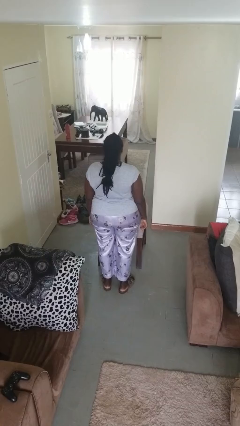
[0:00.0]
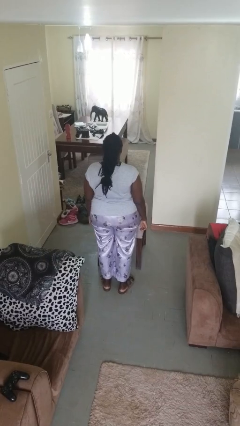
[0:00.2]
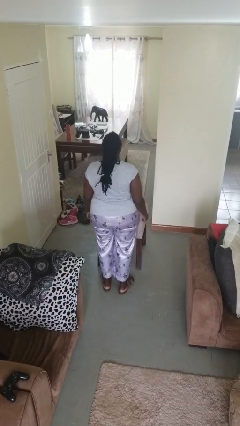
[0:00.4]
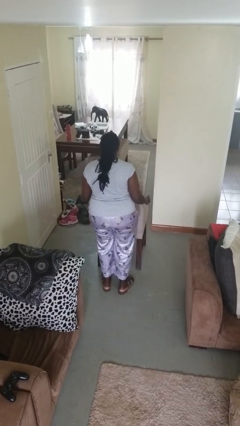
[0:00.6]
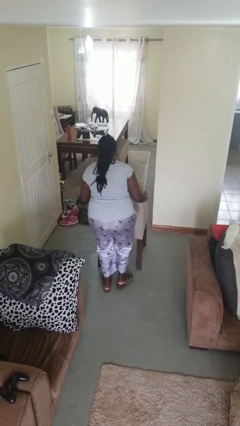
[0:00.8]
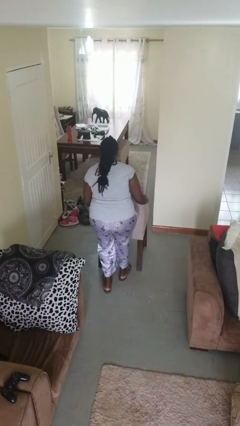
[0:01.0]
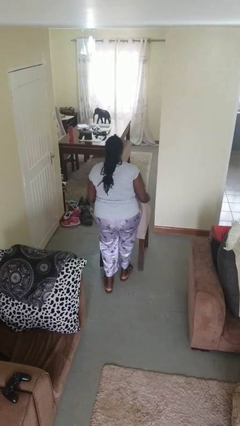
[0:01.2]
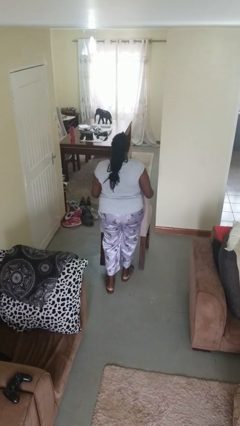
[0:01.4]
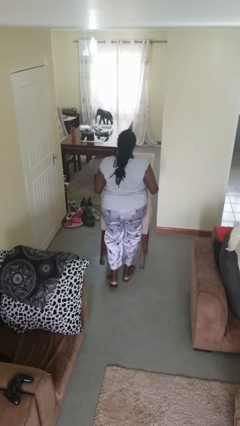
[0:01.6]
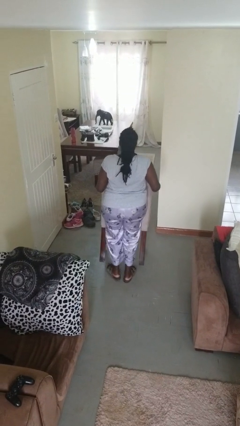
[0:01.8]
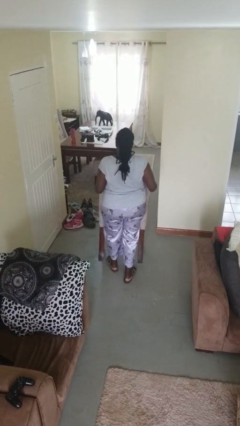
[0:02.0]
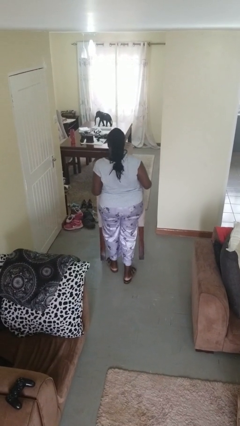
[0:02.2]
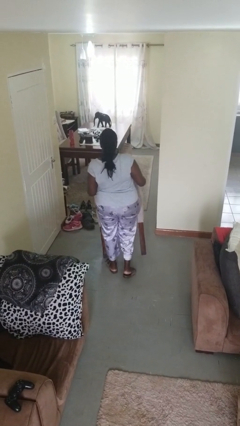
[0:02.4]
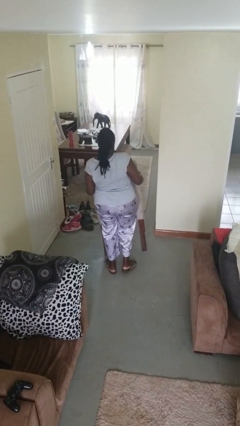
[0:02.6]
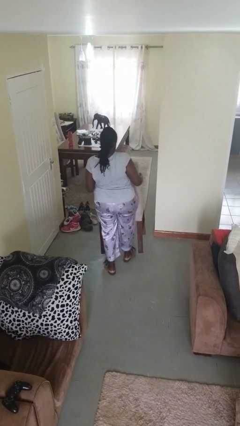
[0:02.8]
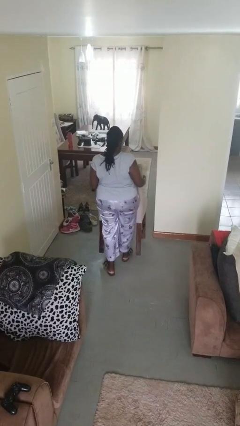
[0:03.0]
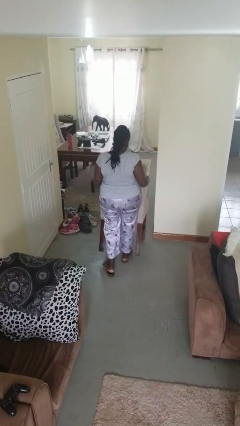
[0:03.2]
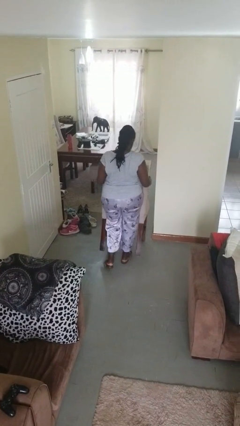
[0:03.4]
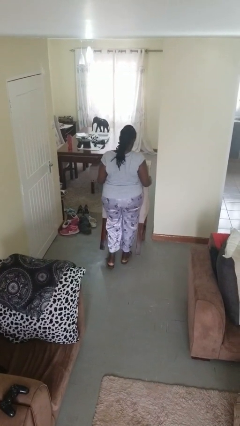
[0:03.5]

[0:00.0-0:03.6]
person carries furniture

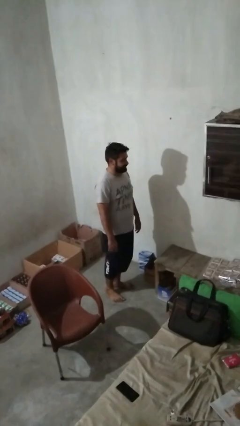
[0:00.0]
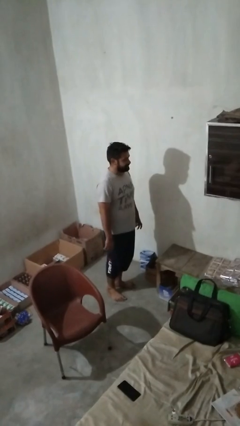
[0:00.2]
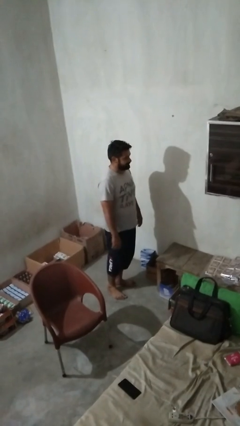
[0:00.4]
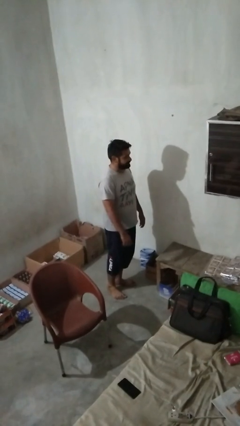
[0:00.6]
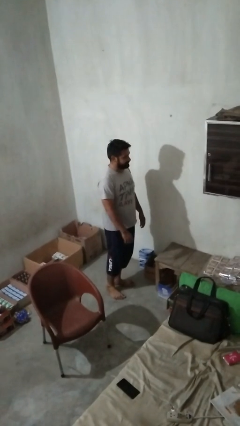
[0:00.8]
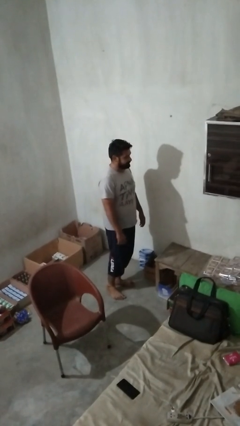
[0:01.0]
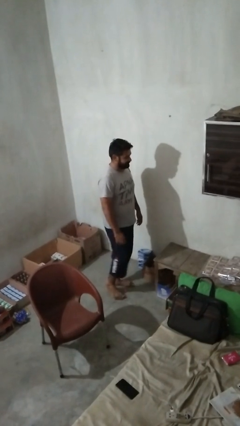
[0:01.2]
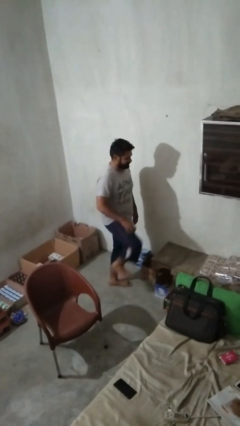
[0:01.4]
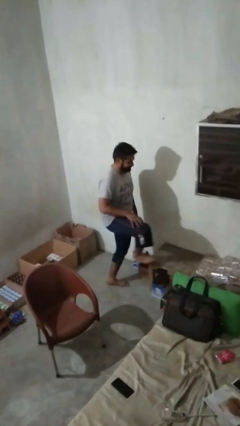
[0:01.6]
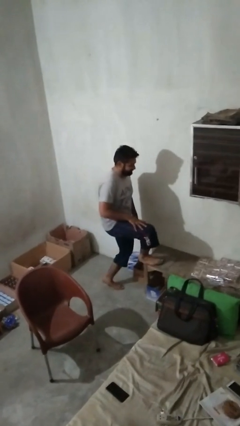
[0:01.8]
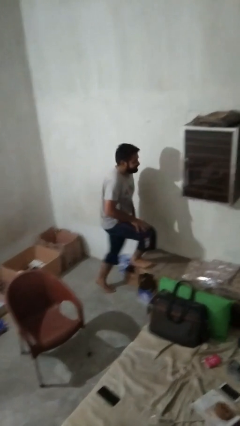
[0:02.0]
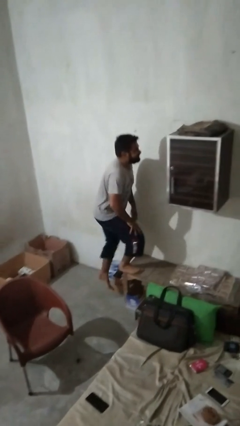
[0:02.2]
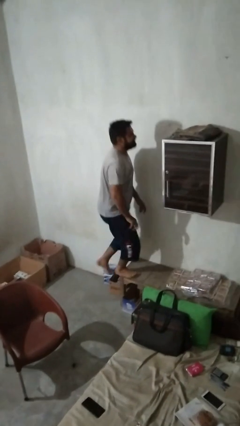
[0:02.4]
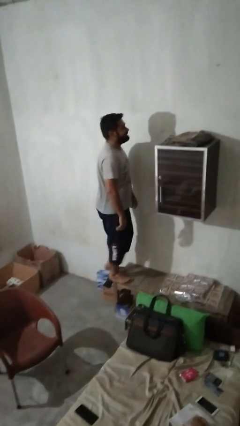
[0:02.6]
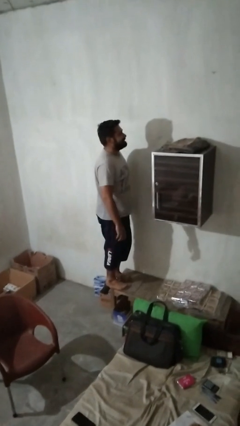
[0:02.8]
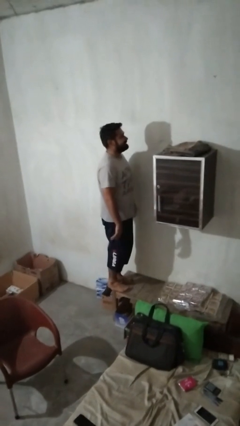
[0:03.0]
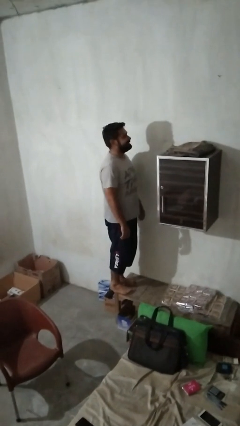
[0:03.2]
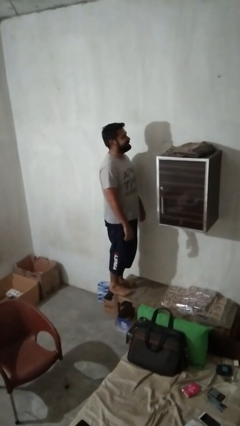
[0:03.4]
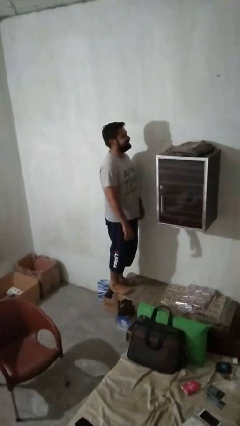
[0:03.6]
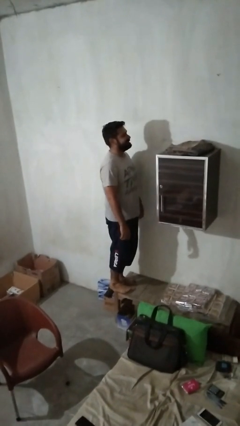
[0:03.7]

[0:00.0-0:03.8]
person climbs on table

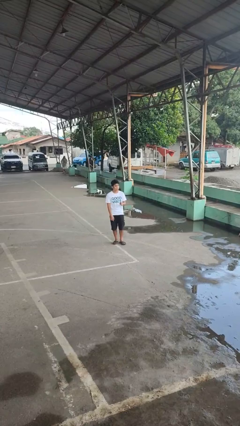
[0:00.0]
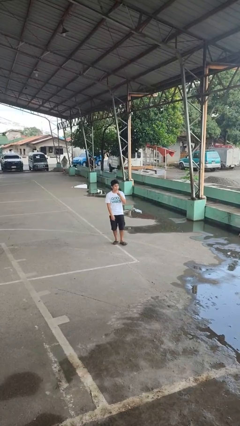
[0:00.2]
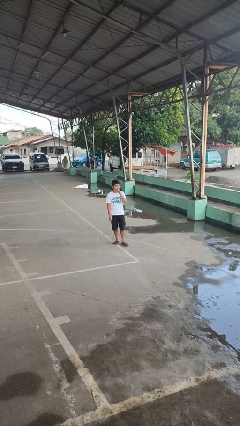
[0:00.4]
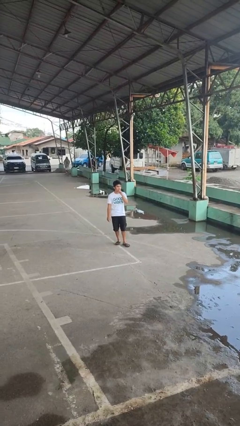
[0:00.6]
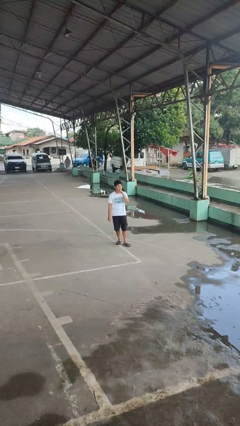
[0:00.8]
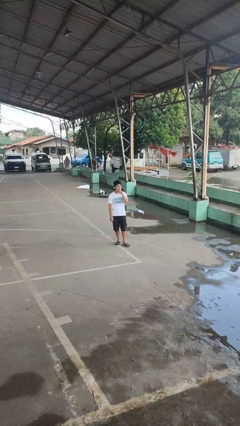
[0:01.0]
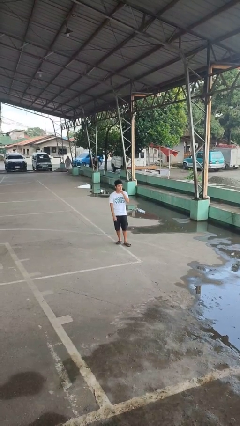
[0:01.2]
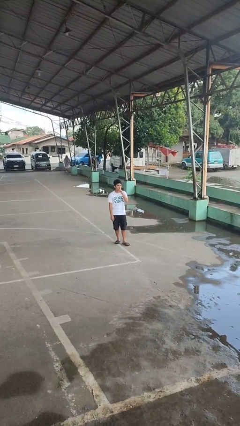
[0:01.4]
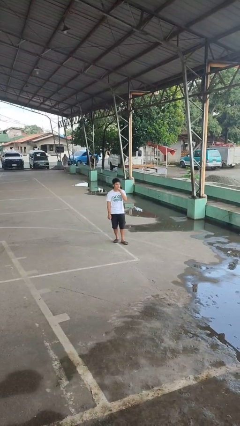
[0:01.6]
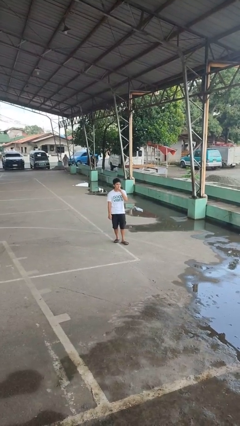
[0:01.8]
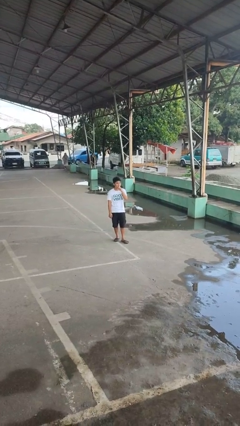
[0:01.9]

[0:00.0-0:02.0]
person gestures be quiet

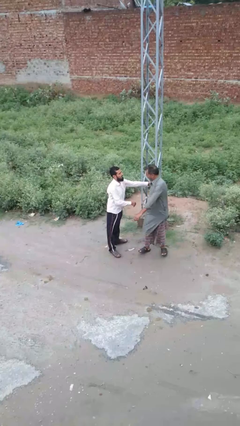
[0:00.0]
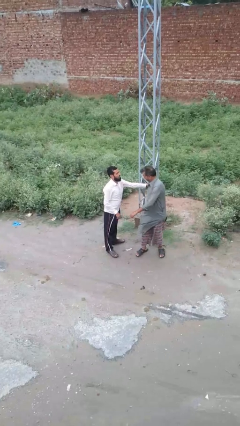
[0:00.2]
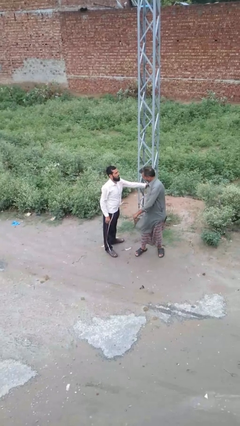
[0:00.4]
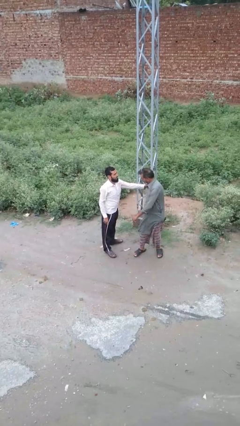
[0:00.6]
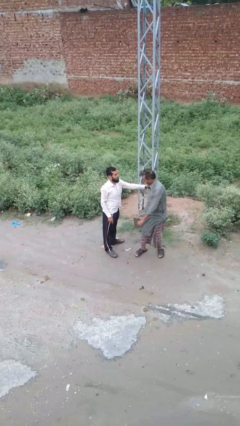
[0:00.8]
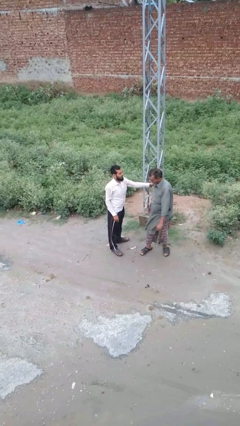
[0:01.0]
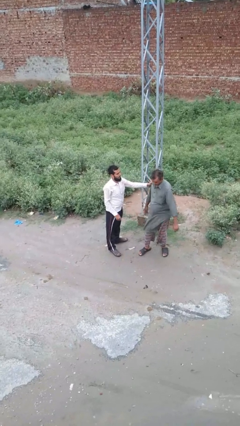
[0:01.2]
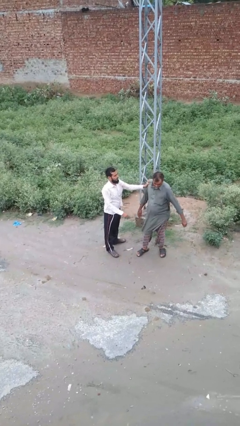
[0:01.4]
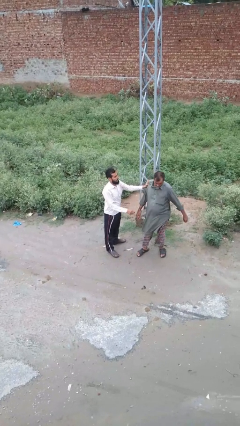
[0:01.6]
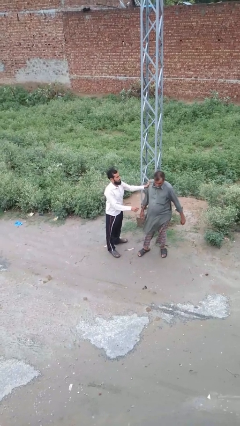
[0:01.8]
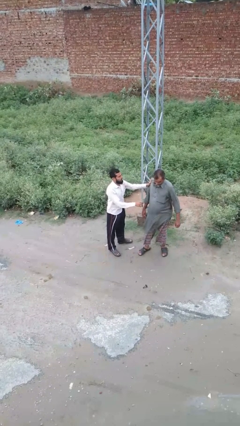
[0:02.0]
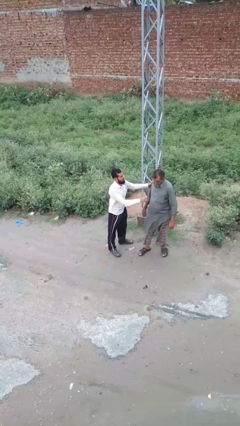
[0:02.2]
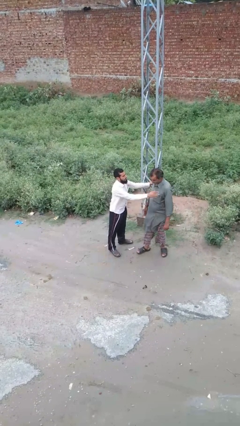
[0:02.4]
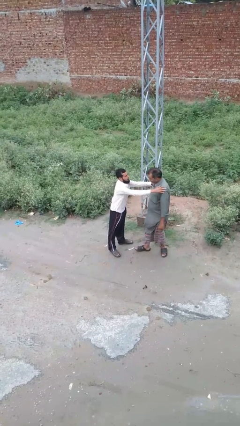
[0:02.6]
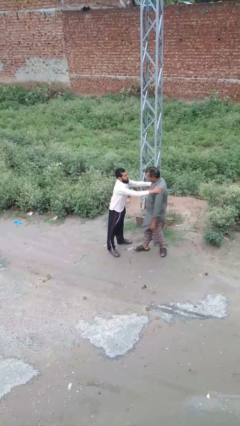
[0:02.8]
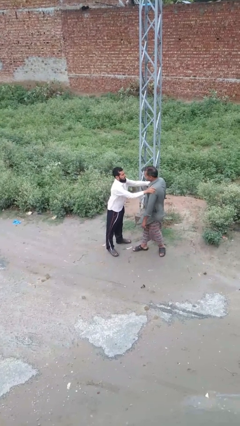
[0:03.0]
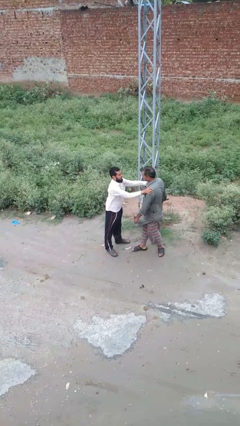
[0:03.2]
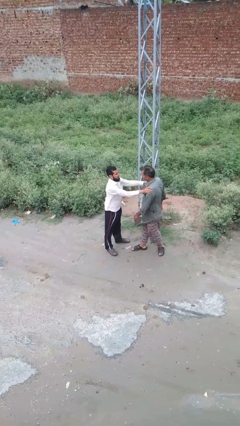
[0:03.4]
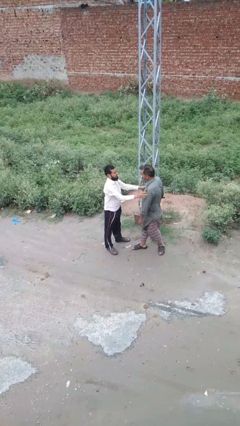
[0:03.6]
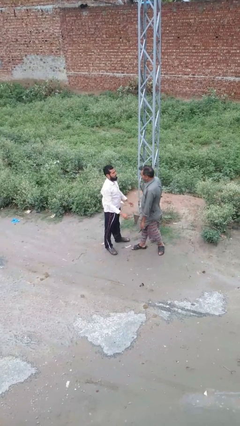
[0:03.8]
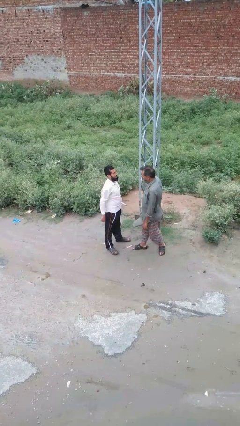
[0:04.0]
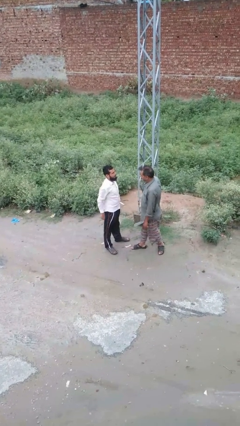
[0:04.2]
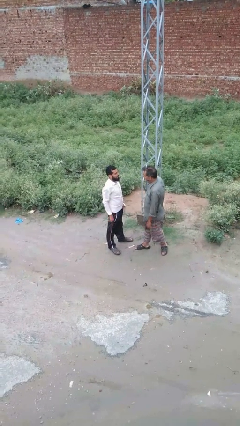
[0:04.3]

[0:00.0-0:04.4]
person spins person around

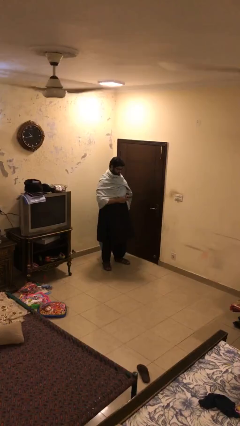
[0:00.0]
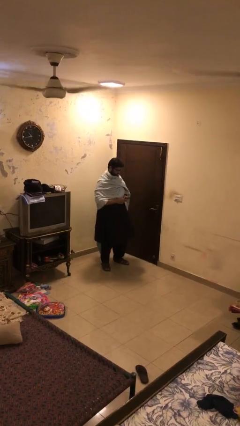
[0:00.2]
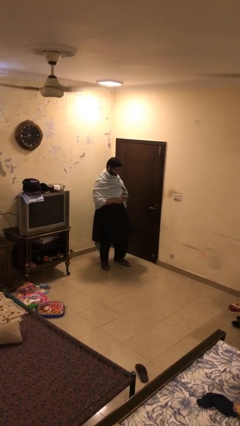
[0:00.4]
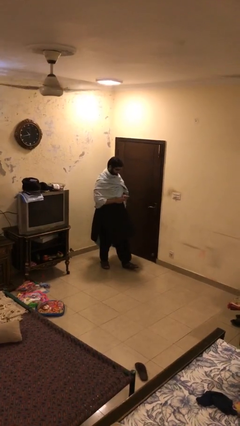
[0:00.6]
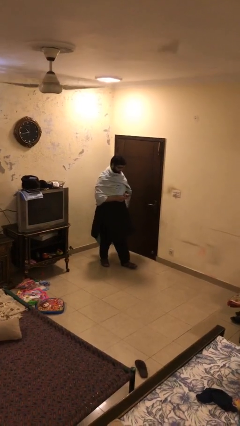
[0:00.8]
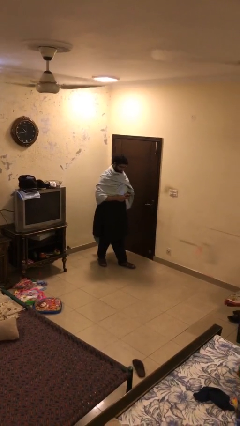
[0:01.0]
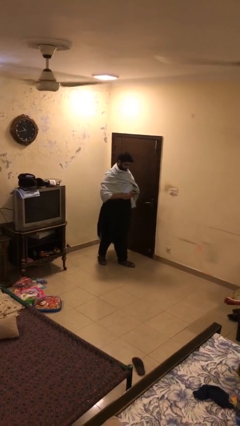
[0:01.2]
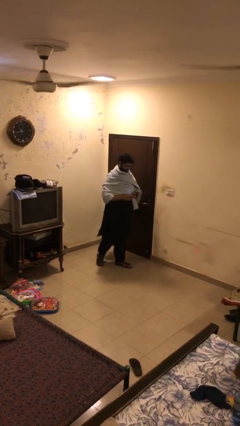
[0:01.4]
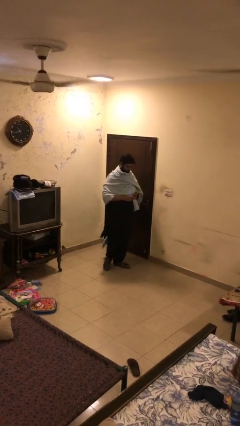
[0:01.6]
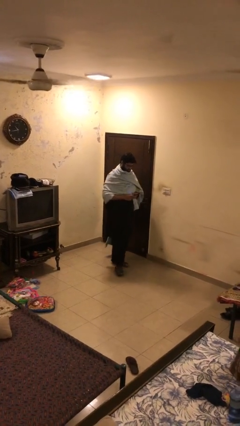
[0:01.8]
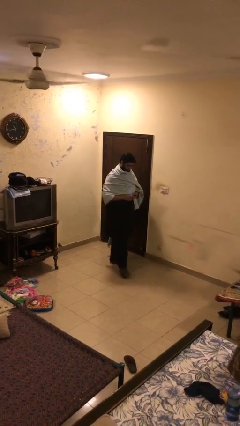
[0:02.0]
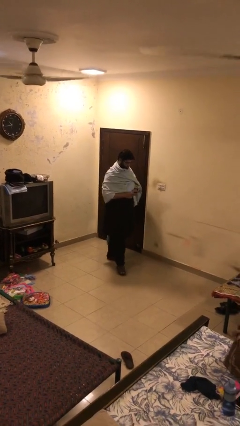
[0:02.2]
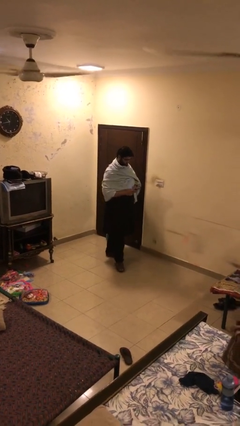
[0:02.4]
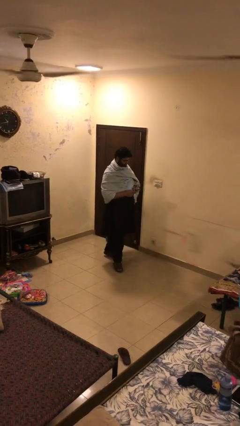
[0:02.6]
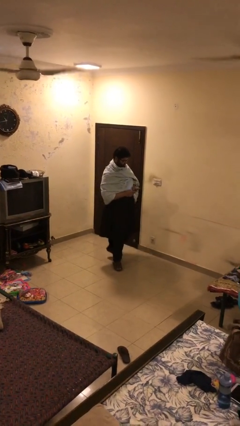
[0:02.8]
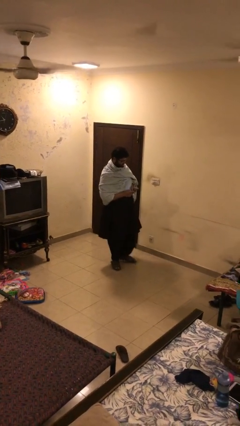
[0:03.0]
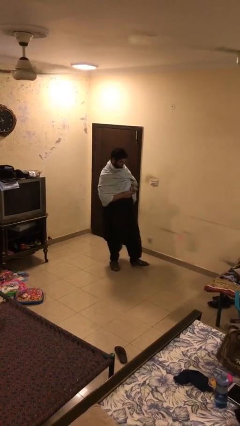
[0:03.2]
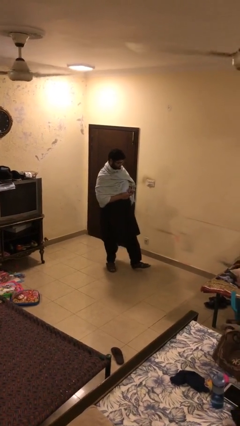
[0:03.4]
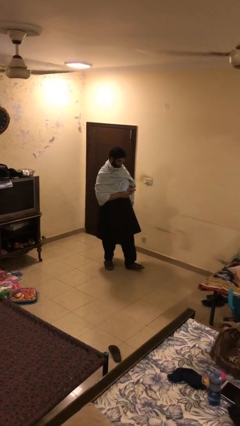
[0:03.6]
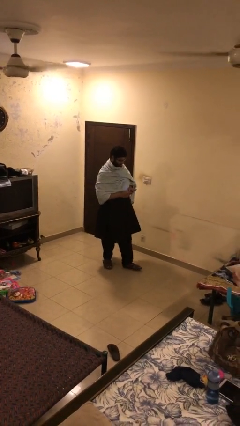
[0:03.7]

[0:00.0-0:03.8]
person texts on phone

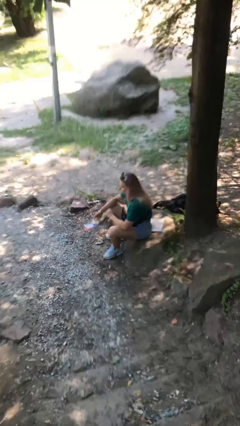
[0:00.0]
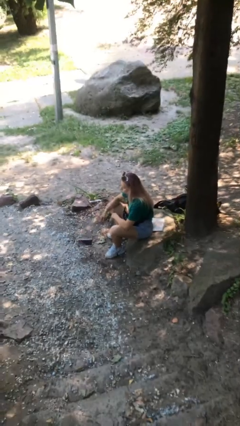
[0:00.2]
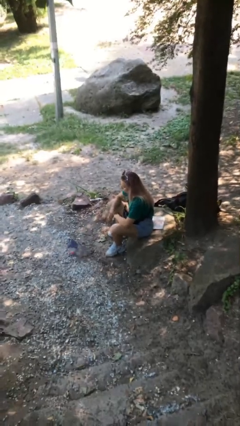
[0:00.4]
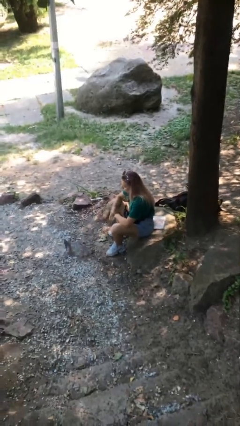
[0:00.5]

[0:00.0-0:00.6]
person drops object
